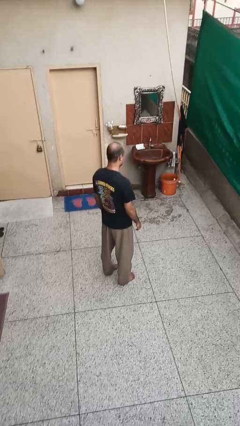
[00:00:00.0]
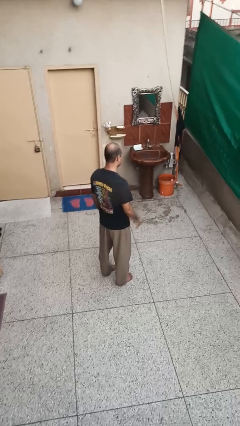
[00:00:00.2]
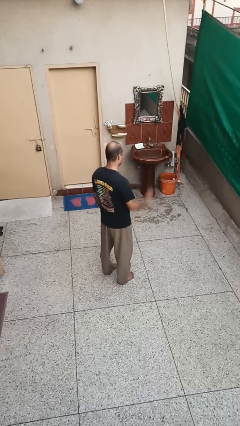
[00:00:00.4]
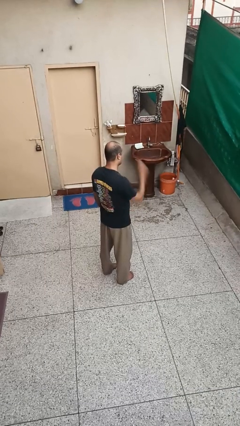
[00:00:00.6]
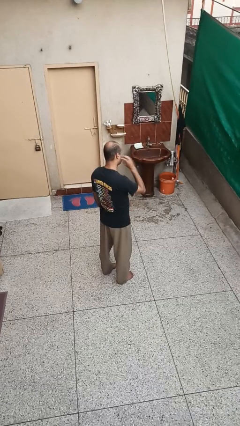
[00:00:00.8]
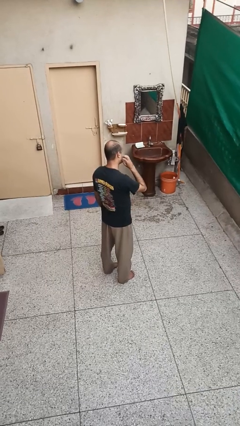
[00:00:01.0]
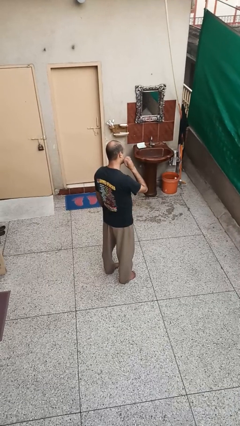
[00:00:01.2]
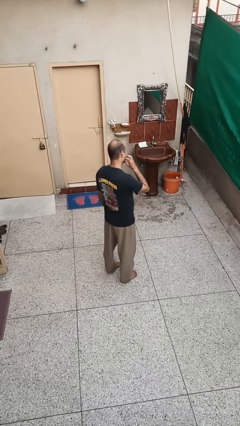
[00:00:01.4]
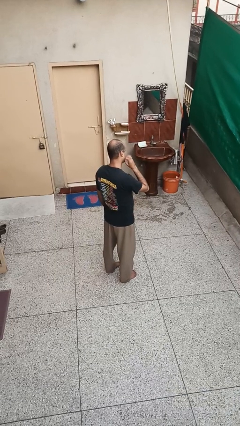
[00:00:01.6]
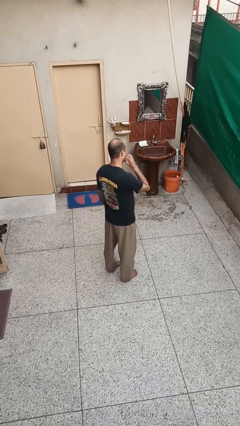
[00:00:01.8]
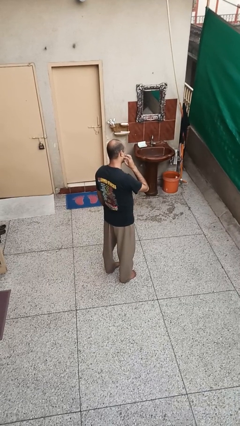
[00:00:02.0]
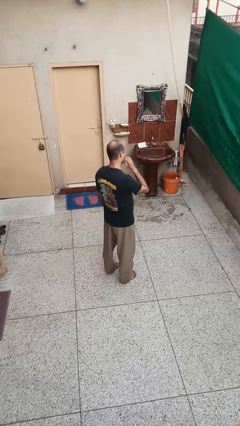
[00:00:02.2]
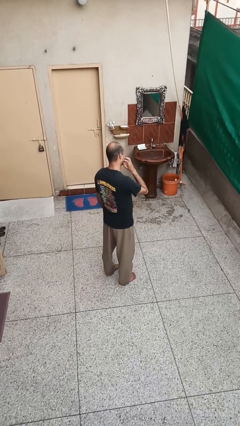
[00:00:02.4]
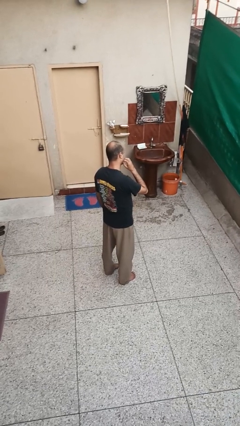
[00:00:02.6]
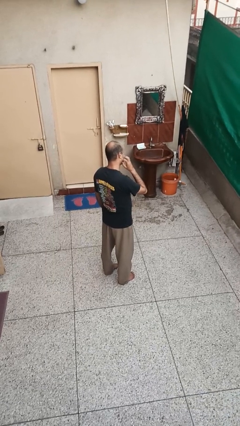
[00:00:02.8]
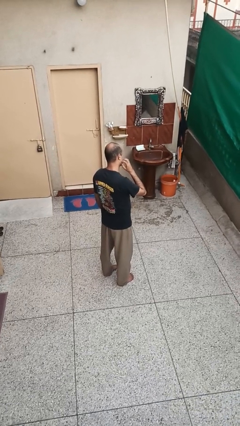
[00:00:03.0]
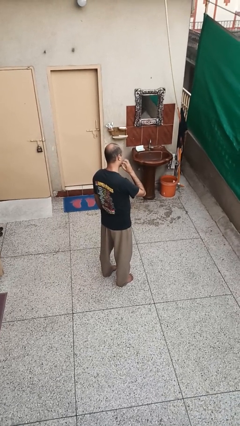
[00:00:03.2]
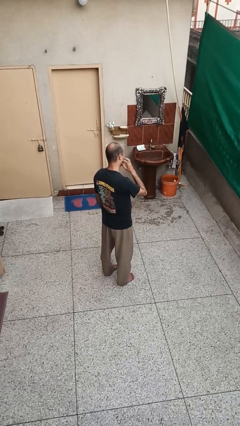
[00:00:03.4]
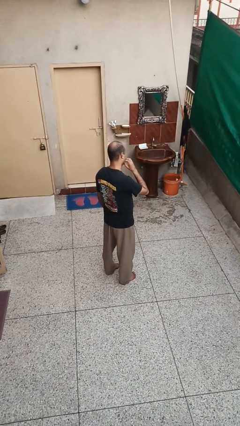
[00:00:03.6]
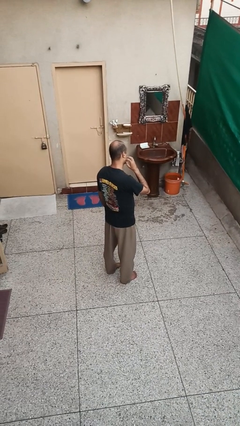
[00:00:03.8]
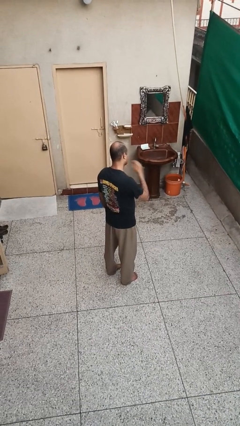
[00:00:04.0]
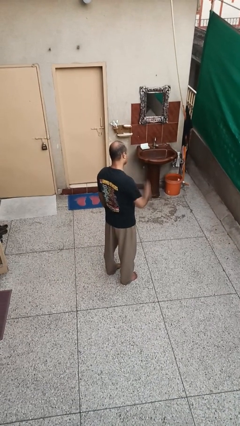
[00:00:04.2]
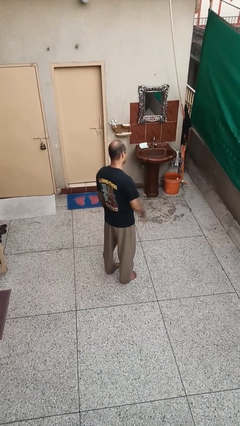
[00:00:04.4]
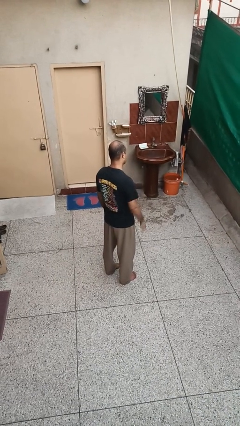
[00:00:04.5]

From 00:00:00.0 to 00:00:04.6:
person scratches face

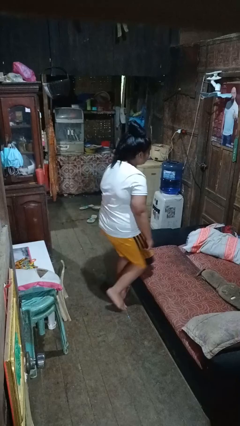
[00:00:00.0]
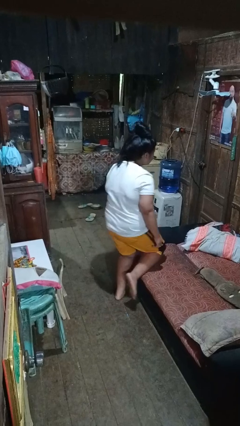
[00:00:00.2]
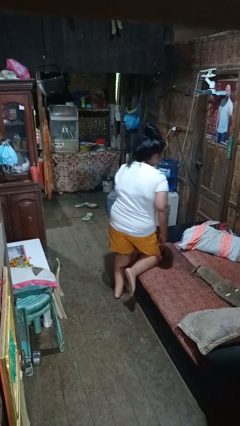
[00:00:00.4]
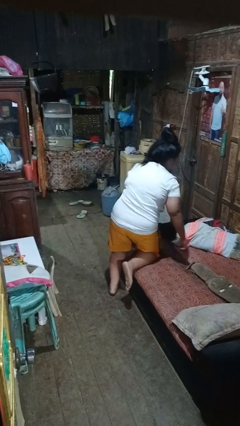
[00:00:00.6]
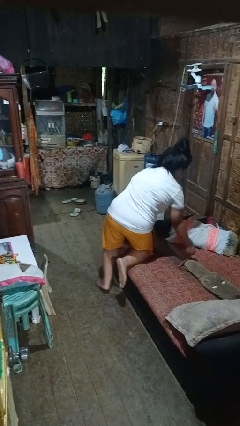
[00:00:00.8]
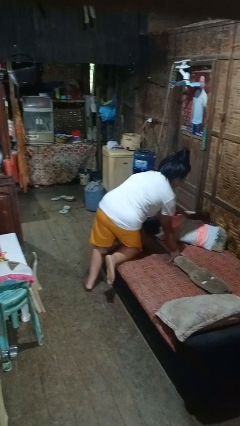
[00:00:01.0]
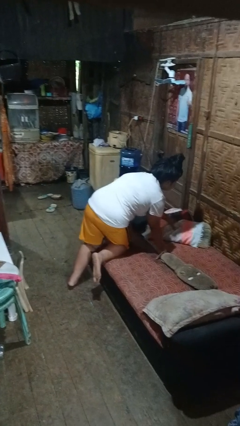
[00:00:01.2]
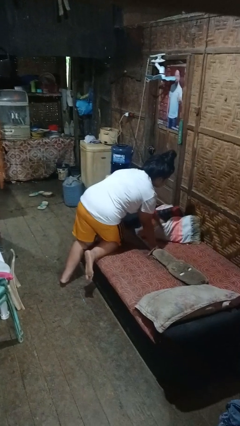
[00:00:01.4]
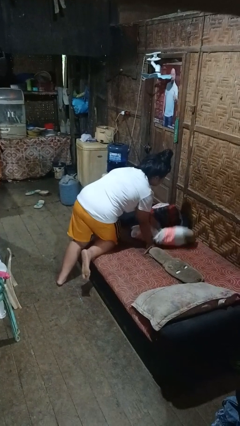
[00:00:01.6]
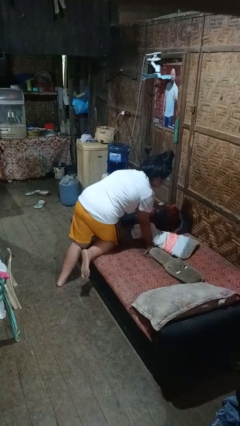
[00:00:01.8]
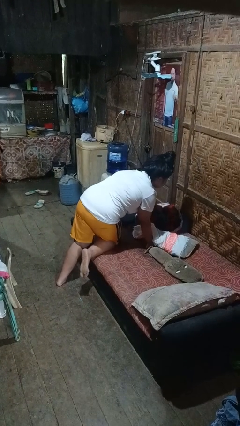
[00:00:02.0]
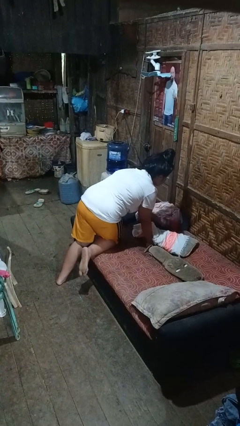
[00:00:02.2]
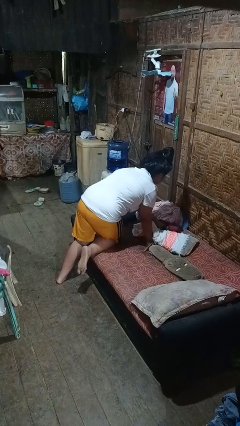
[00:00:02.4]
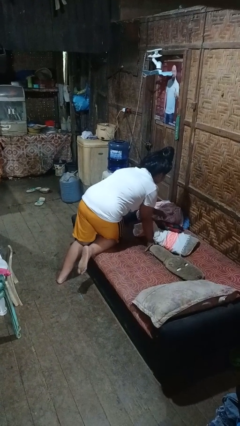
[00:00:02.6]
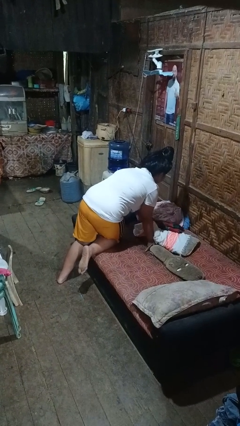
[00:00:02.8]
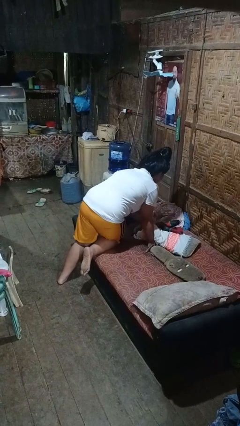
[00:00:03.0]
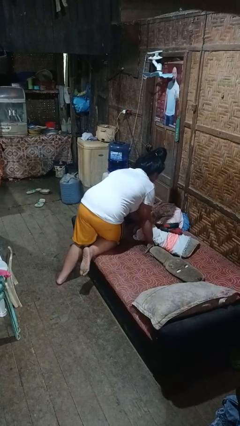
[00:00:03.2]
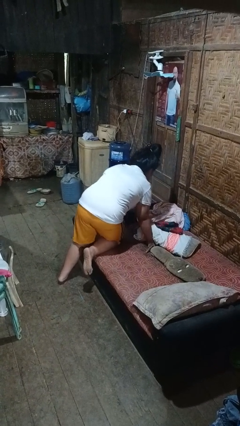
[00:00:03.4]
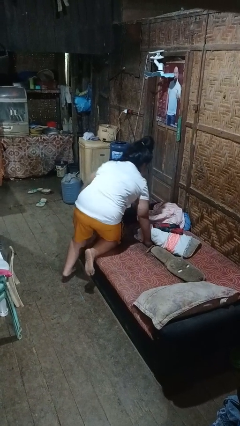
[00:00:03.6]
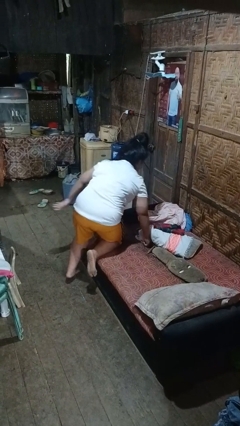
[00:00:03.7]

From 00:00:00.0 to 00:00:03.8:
person searches in couch

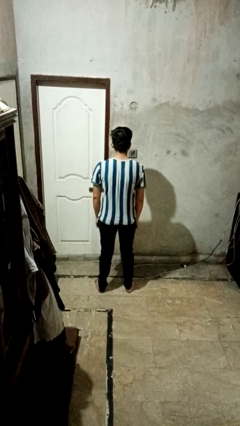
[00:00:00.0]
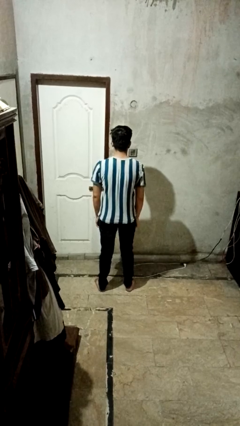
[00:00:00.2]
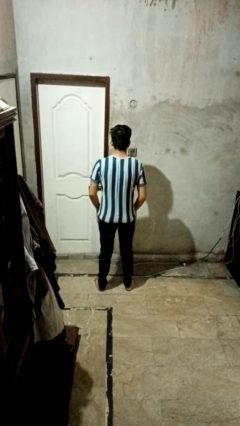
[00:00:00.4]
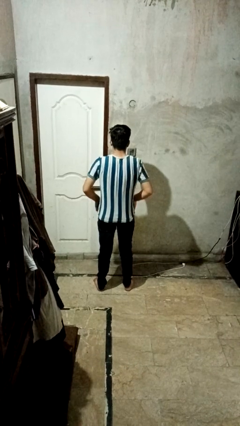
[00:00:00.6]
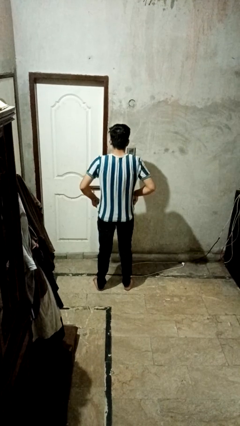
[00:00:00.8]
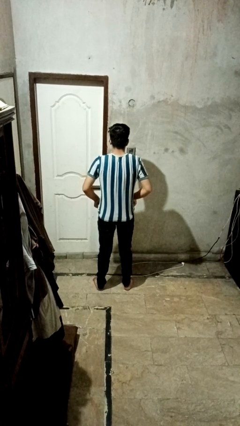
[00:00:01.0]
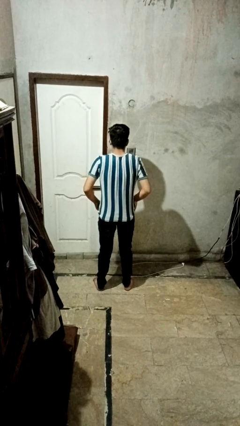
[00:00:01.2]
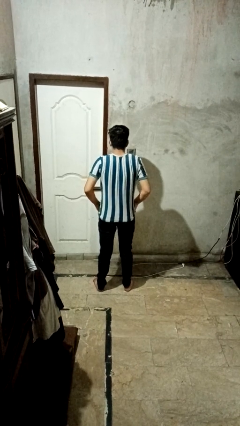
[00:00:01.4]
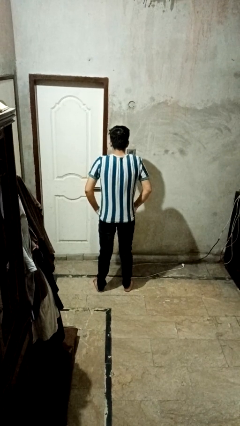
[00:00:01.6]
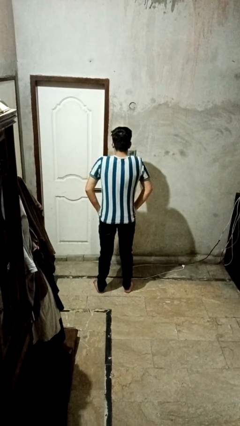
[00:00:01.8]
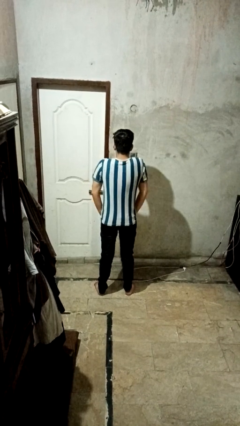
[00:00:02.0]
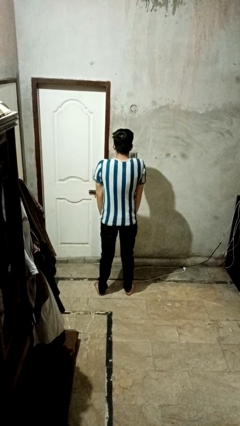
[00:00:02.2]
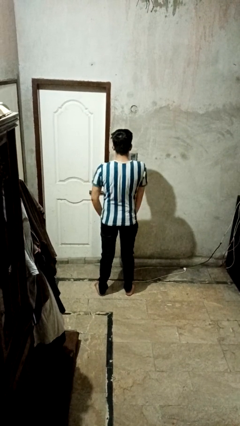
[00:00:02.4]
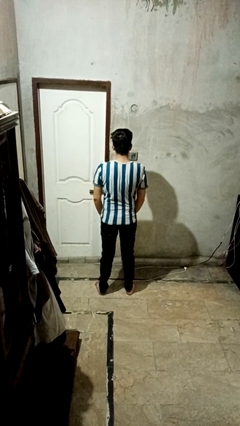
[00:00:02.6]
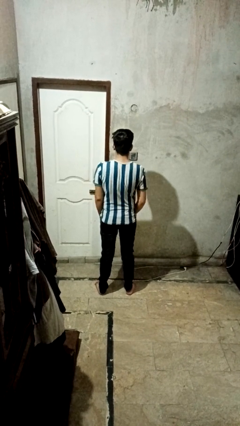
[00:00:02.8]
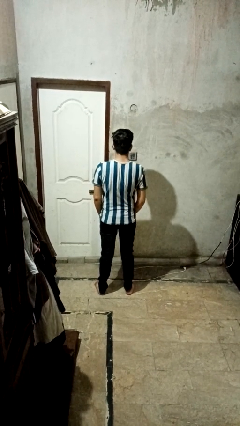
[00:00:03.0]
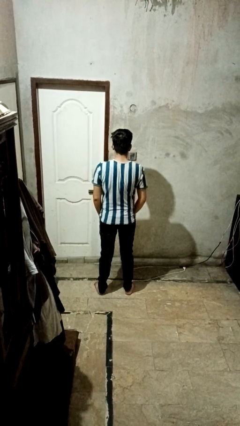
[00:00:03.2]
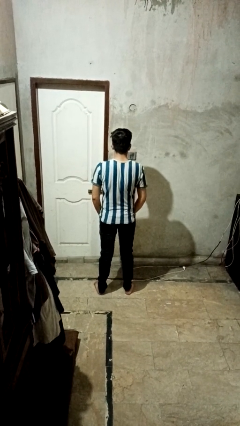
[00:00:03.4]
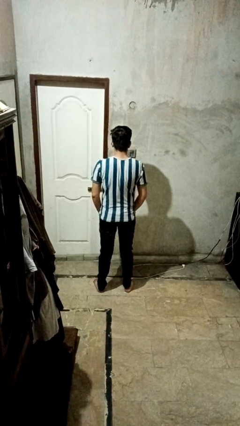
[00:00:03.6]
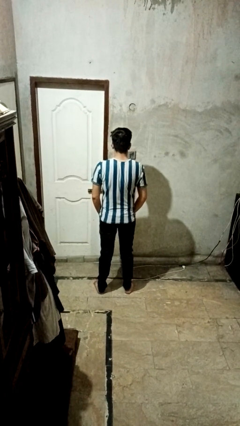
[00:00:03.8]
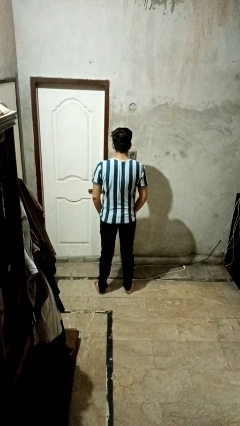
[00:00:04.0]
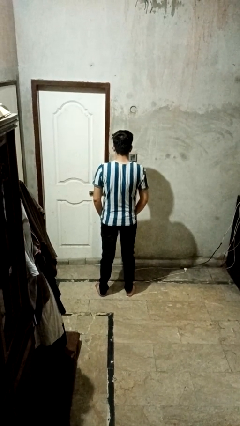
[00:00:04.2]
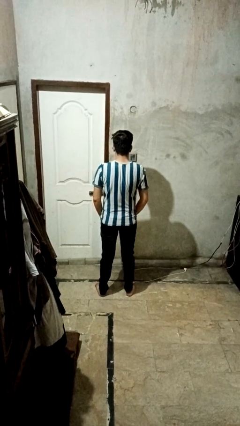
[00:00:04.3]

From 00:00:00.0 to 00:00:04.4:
person puts hands in back pockets

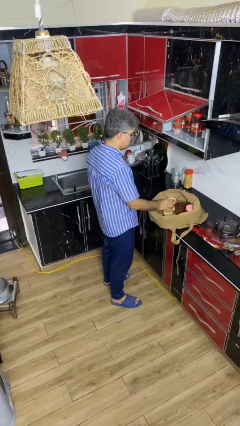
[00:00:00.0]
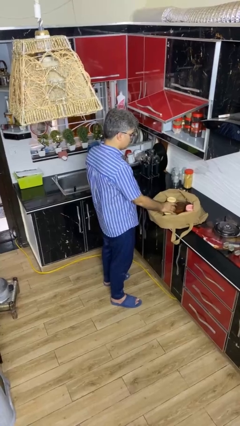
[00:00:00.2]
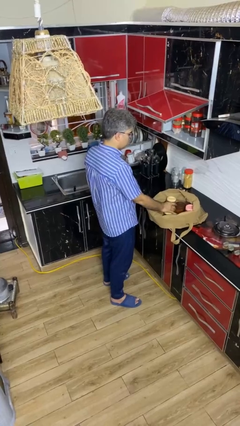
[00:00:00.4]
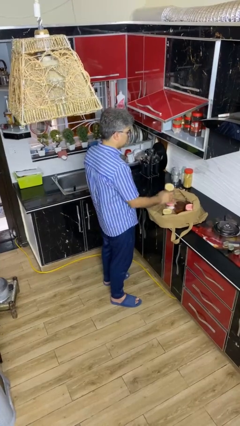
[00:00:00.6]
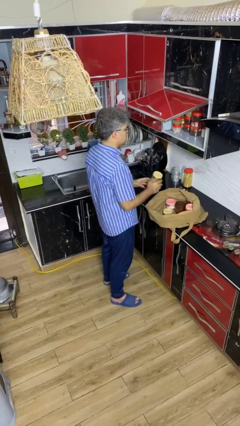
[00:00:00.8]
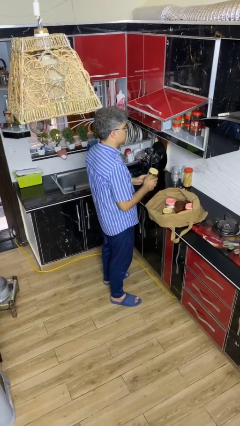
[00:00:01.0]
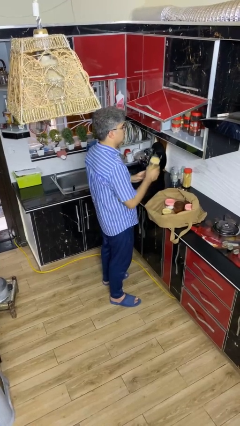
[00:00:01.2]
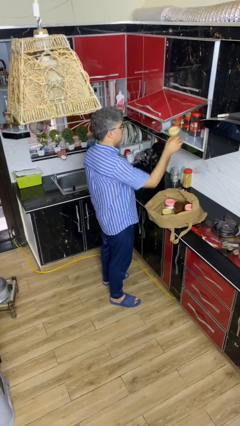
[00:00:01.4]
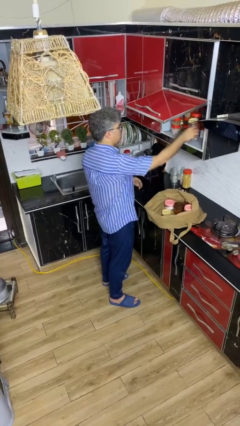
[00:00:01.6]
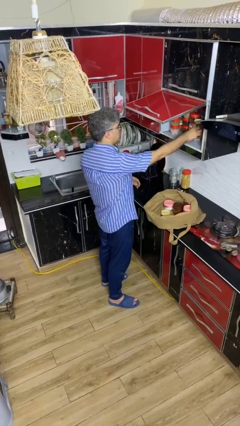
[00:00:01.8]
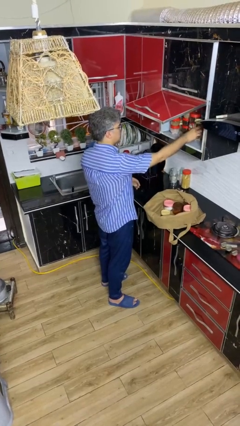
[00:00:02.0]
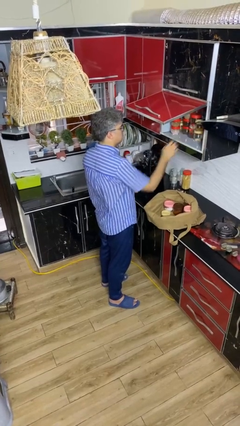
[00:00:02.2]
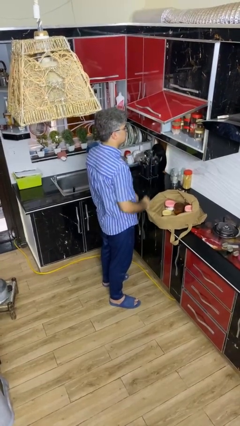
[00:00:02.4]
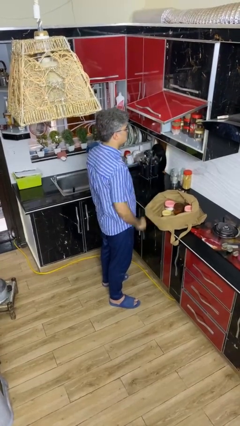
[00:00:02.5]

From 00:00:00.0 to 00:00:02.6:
person loads groceries into cabinet

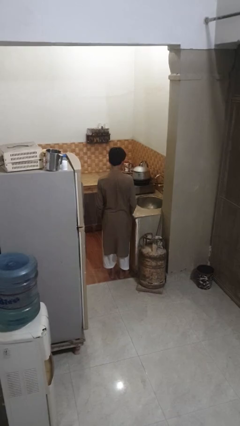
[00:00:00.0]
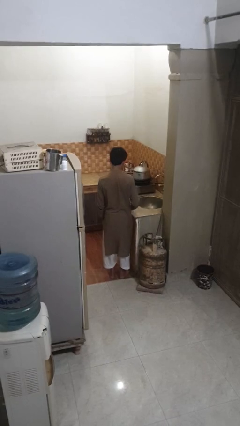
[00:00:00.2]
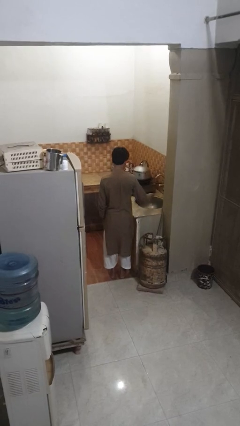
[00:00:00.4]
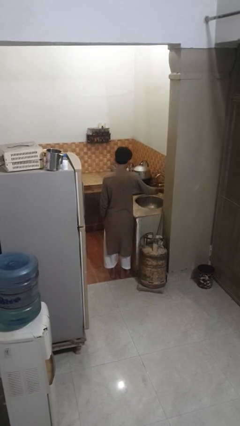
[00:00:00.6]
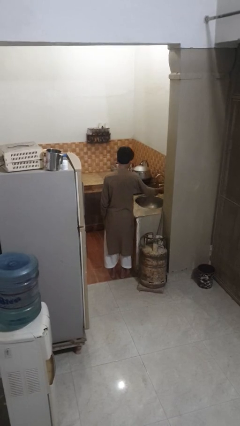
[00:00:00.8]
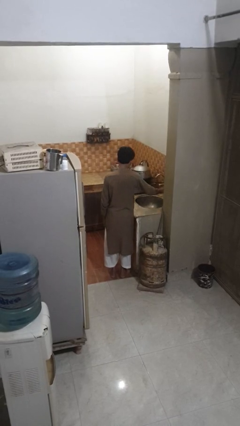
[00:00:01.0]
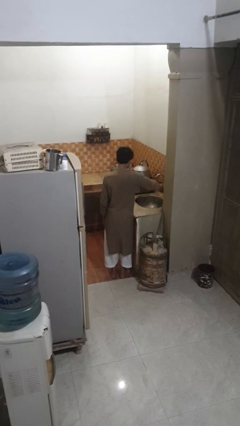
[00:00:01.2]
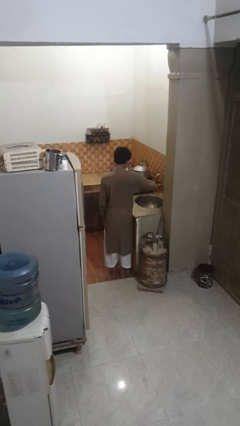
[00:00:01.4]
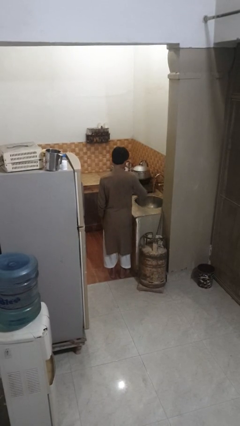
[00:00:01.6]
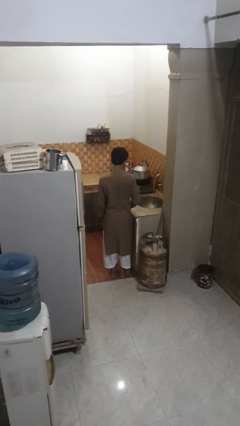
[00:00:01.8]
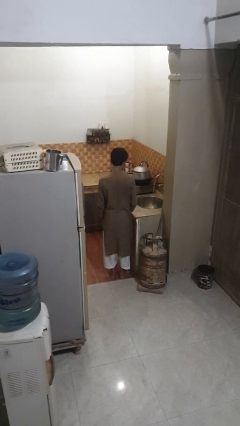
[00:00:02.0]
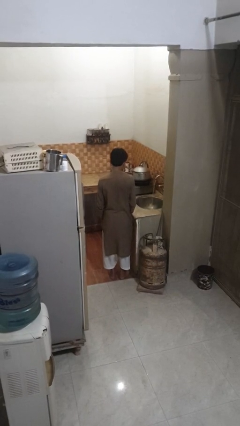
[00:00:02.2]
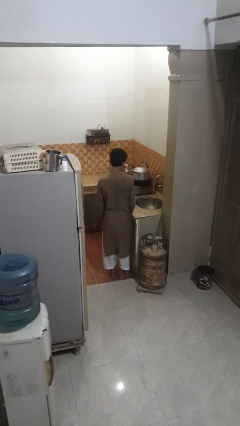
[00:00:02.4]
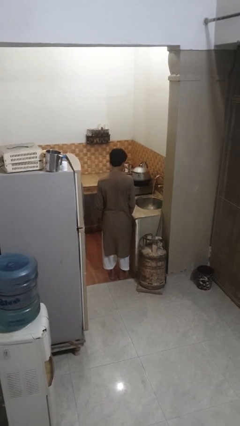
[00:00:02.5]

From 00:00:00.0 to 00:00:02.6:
person turns on faucet
